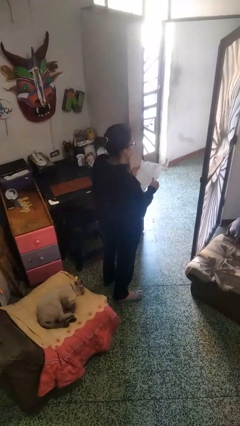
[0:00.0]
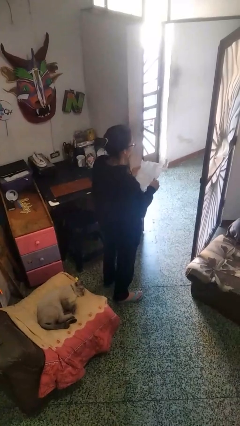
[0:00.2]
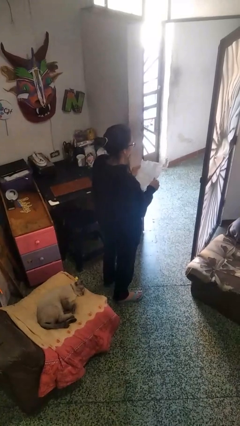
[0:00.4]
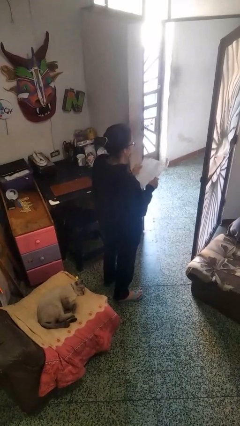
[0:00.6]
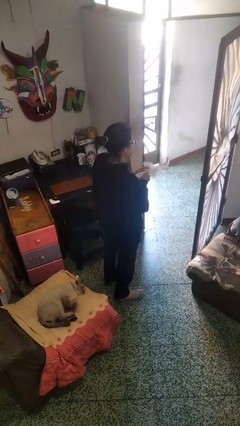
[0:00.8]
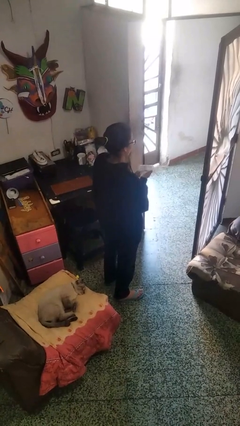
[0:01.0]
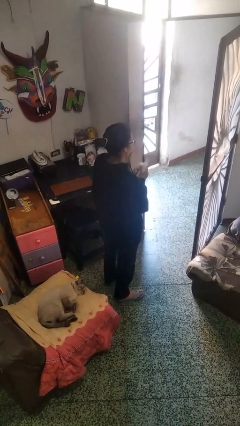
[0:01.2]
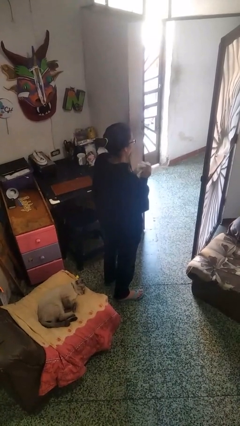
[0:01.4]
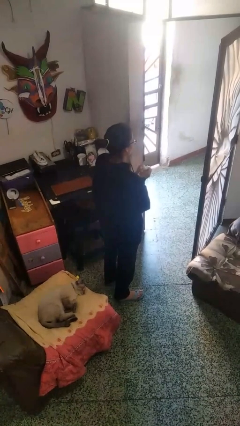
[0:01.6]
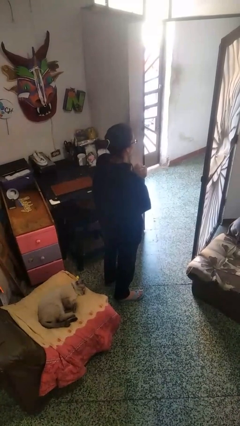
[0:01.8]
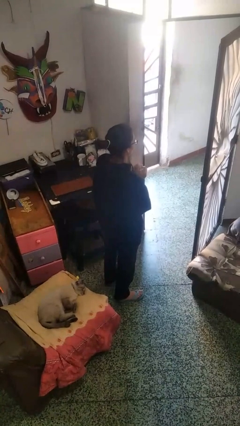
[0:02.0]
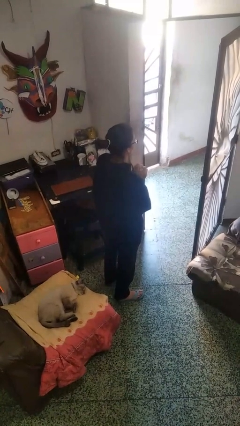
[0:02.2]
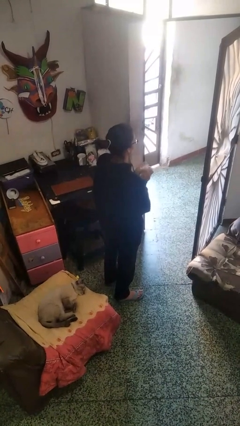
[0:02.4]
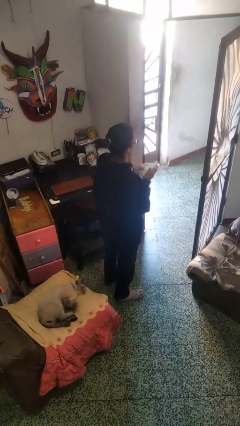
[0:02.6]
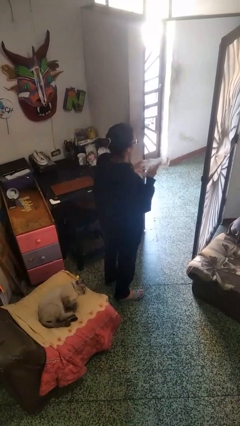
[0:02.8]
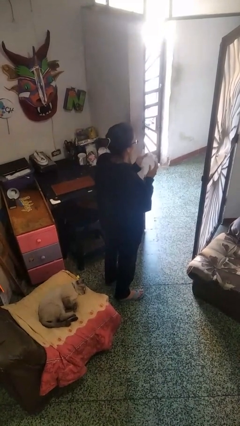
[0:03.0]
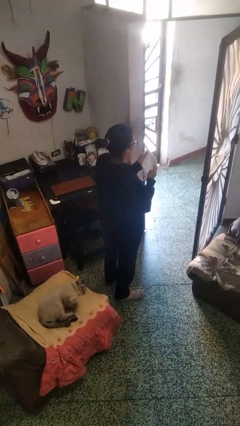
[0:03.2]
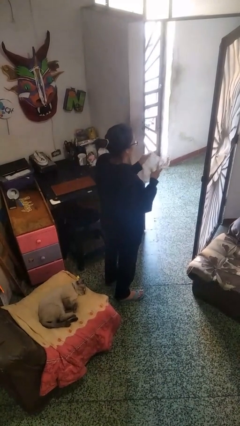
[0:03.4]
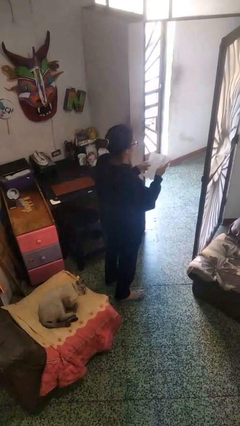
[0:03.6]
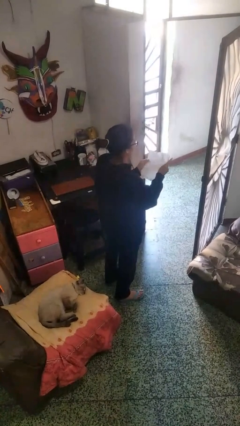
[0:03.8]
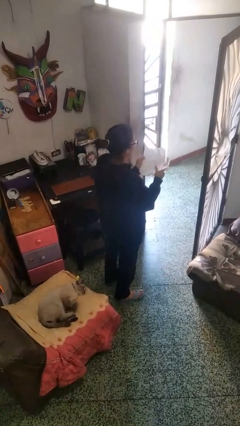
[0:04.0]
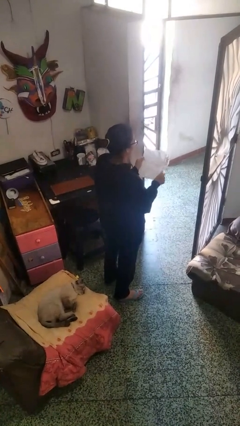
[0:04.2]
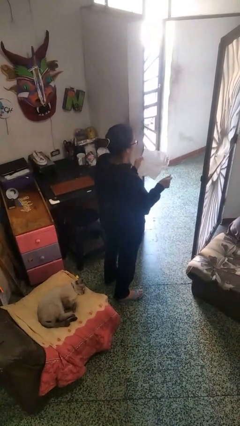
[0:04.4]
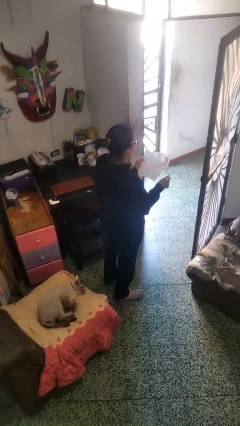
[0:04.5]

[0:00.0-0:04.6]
person crumples paper

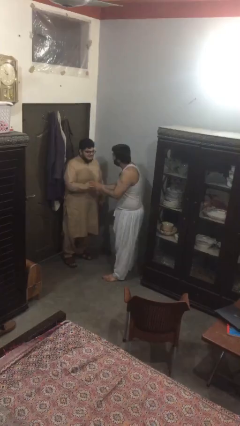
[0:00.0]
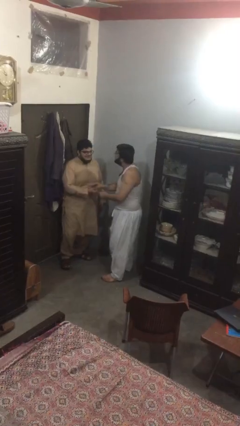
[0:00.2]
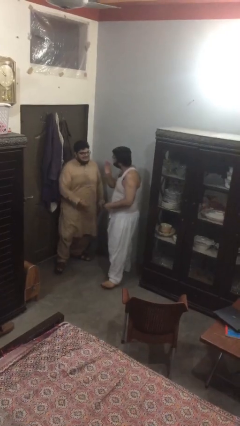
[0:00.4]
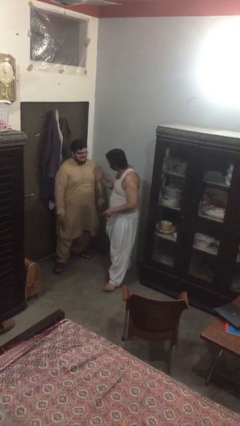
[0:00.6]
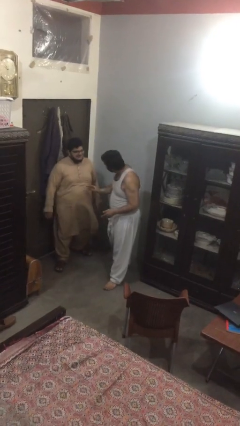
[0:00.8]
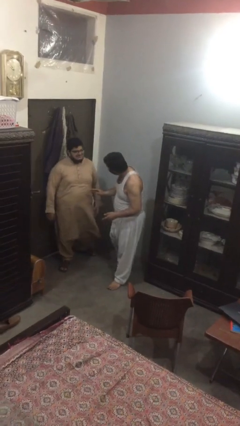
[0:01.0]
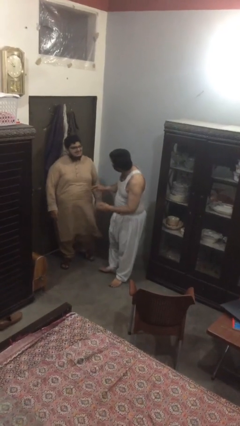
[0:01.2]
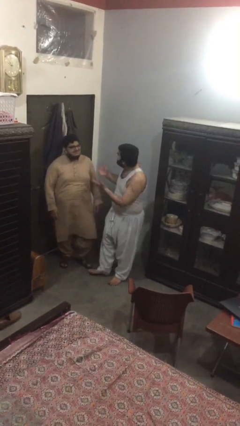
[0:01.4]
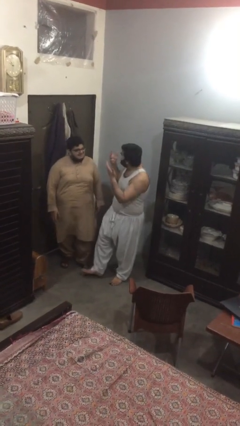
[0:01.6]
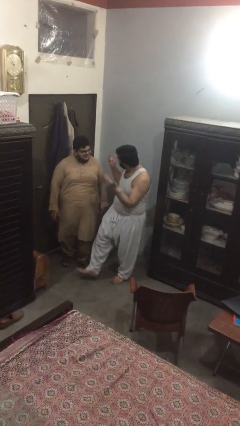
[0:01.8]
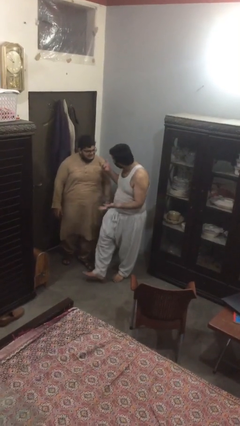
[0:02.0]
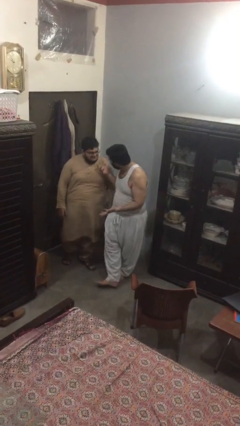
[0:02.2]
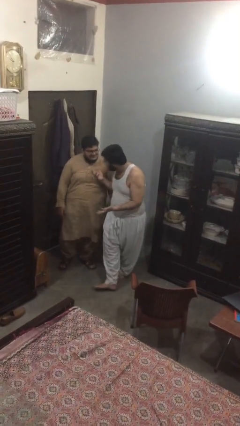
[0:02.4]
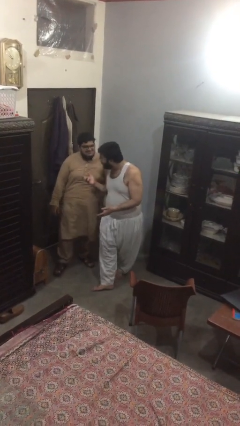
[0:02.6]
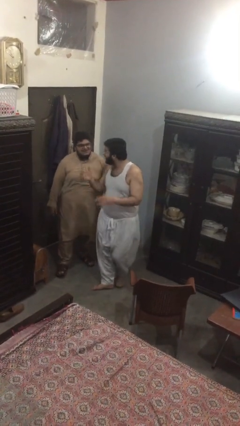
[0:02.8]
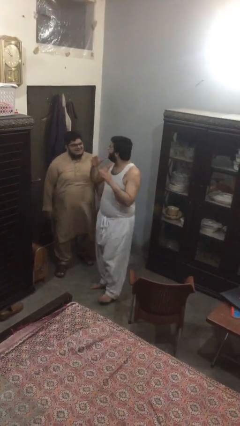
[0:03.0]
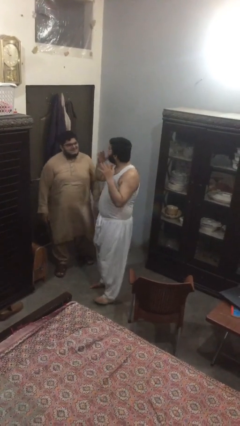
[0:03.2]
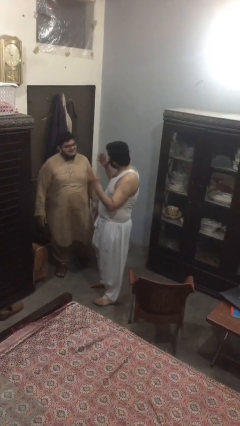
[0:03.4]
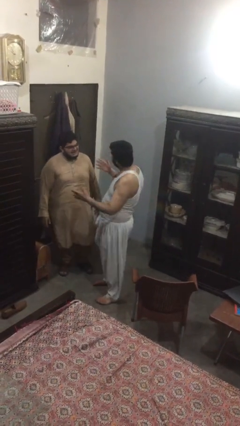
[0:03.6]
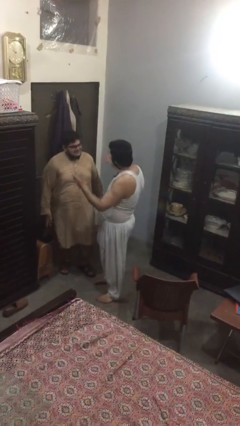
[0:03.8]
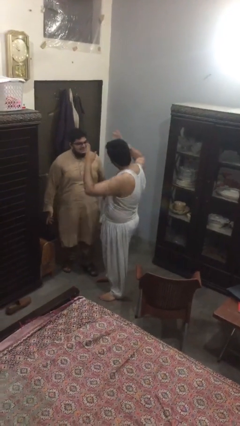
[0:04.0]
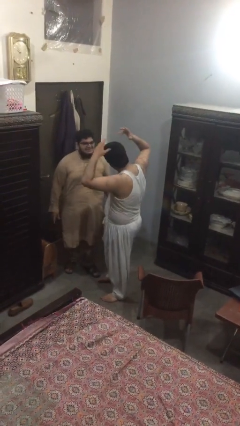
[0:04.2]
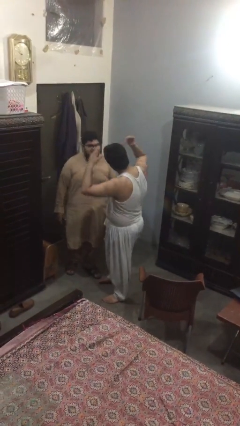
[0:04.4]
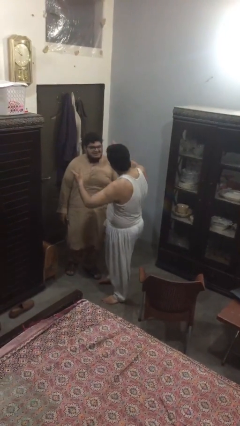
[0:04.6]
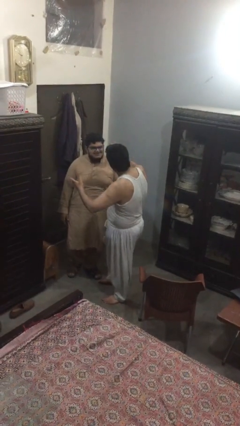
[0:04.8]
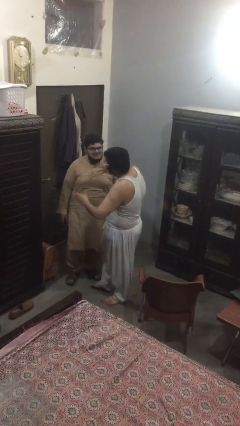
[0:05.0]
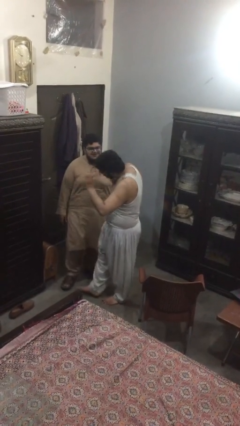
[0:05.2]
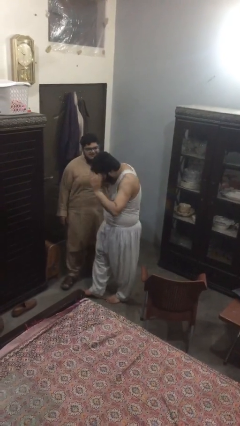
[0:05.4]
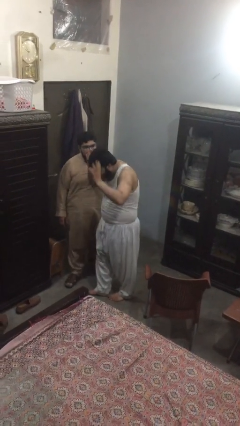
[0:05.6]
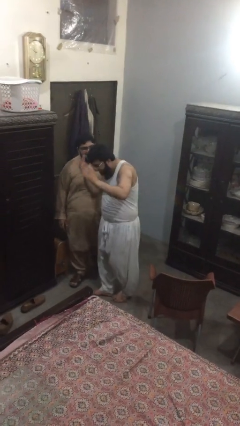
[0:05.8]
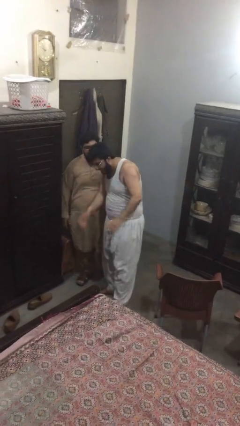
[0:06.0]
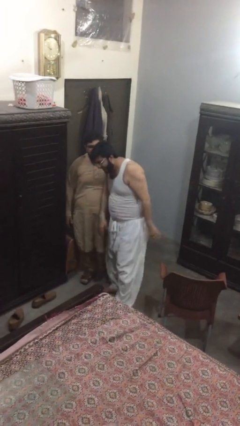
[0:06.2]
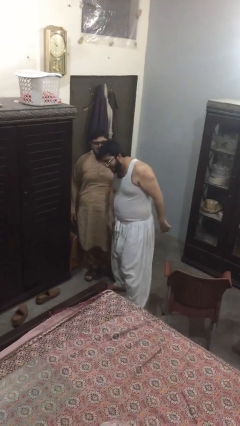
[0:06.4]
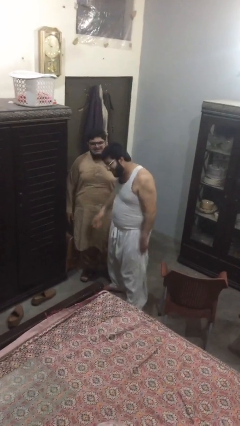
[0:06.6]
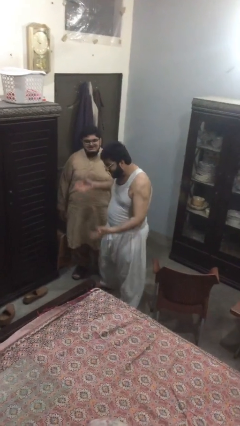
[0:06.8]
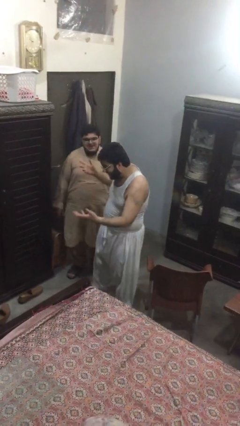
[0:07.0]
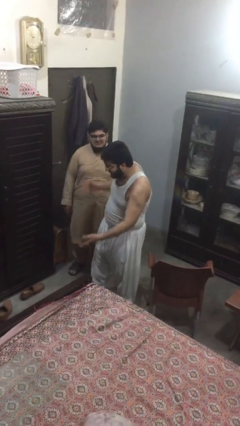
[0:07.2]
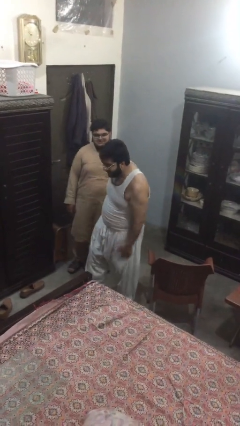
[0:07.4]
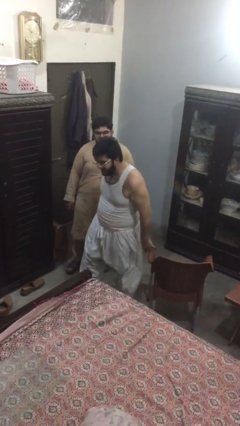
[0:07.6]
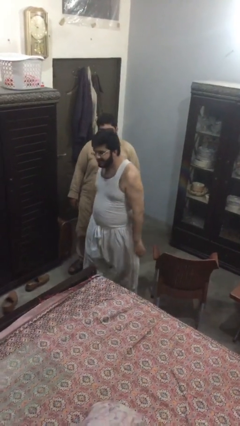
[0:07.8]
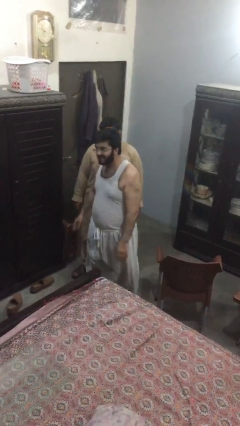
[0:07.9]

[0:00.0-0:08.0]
person talks to person

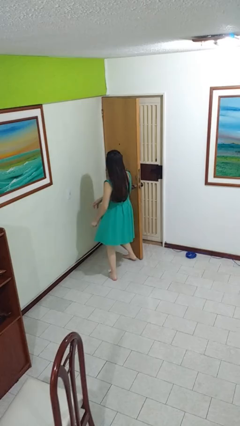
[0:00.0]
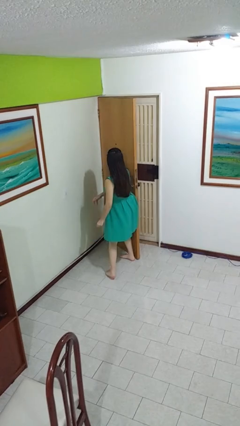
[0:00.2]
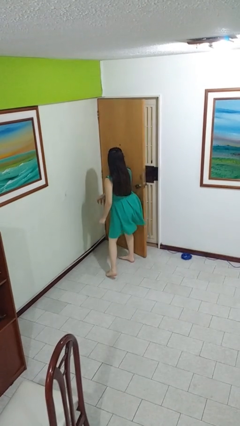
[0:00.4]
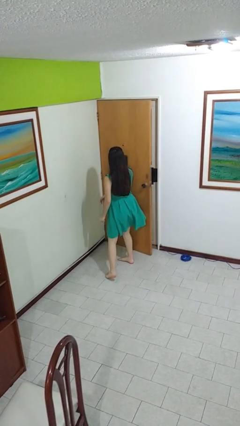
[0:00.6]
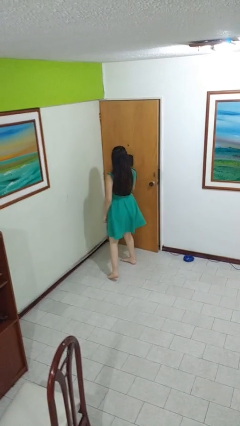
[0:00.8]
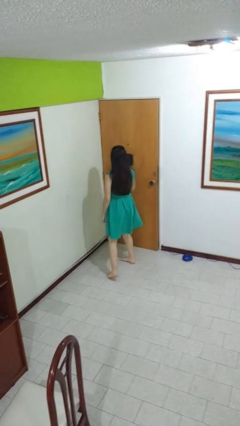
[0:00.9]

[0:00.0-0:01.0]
person closes door with hip

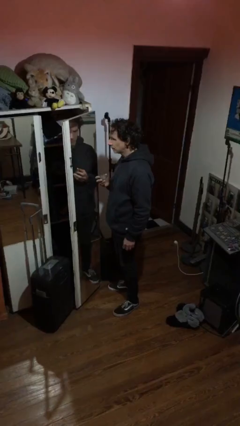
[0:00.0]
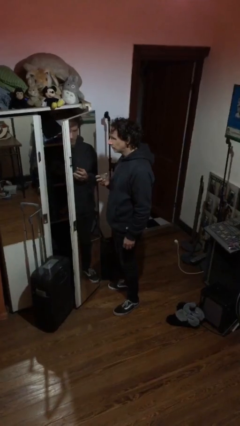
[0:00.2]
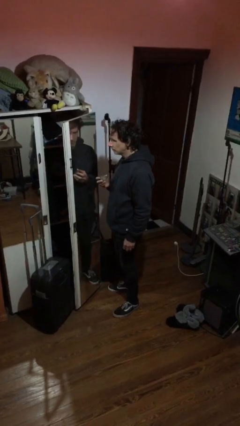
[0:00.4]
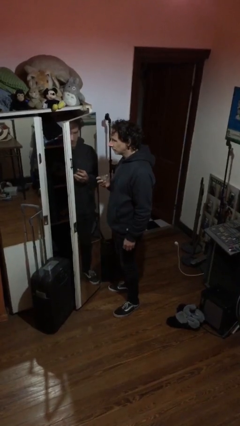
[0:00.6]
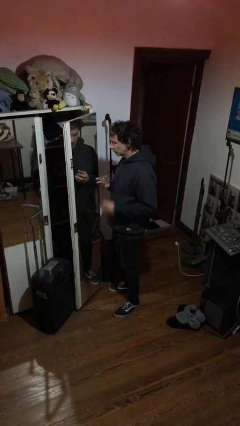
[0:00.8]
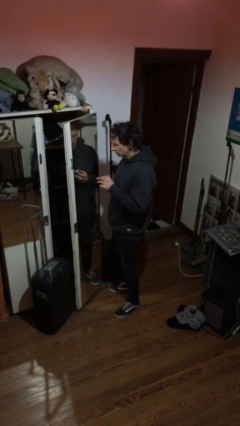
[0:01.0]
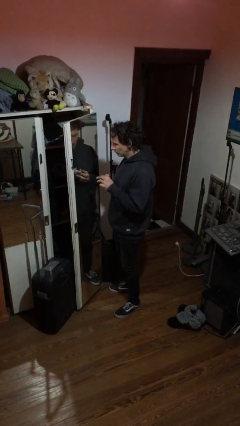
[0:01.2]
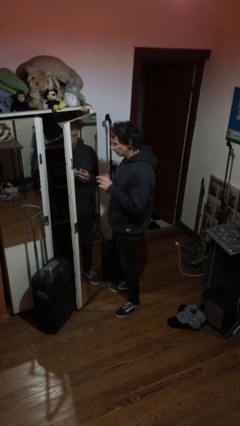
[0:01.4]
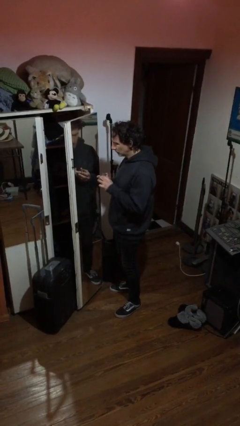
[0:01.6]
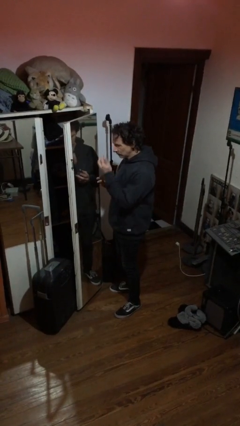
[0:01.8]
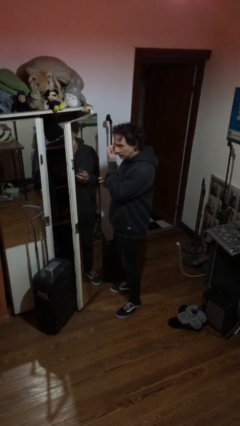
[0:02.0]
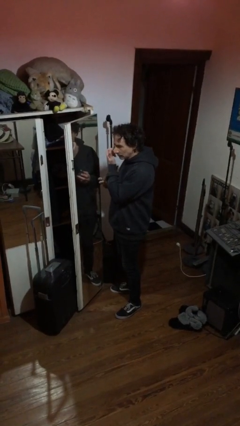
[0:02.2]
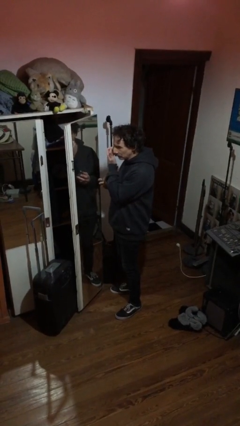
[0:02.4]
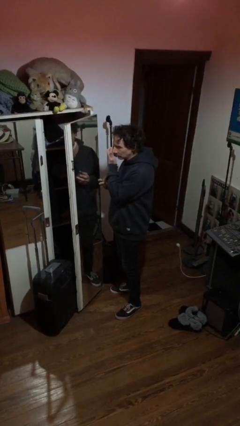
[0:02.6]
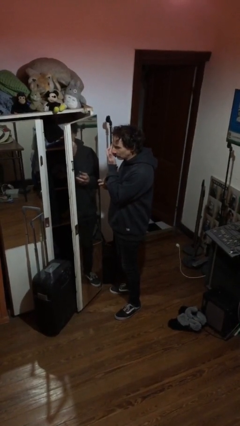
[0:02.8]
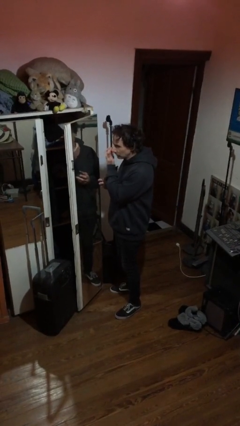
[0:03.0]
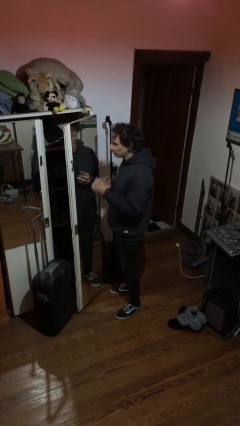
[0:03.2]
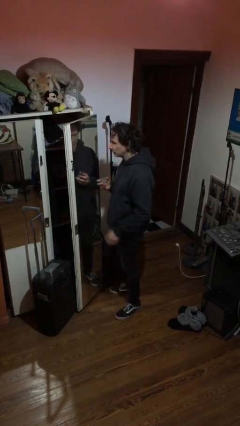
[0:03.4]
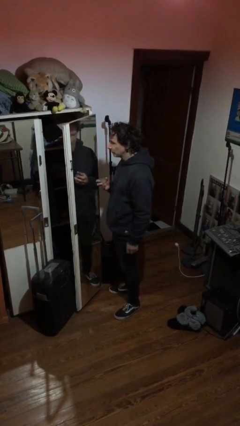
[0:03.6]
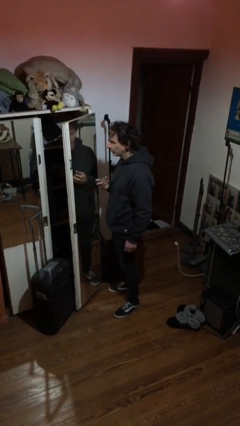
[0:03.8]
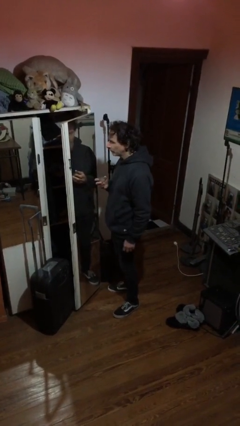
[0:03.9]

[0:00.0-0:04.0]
person applies eye makeup
